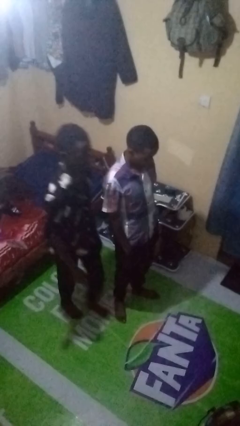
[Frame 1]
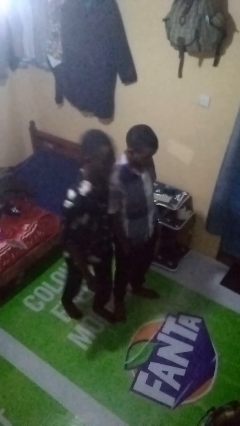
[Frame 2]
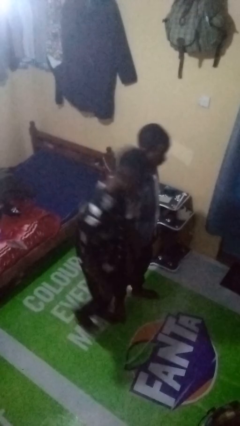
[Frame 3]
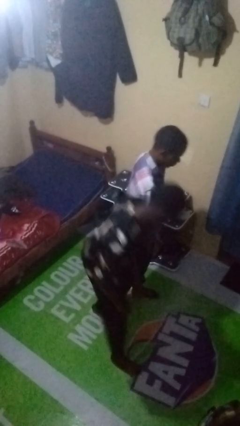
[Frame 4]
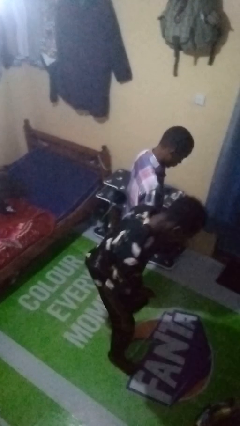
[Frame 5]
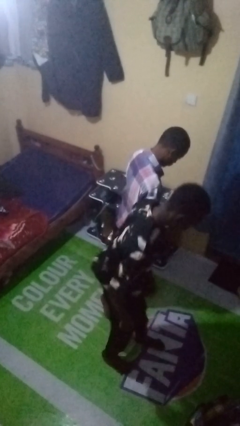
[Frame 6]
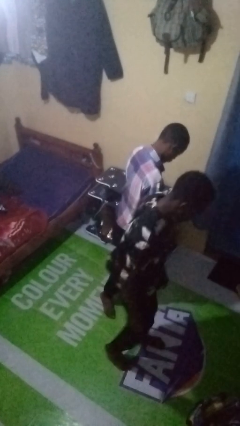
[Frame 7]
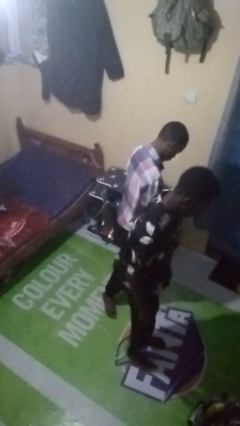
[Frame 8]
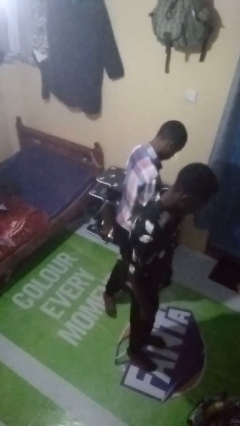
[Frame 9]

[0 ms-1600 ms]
person bumps into person

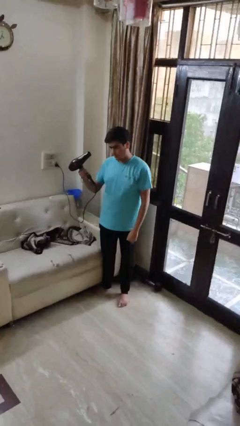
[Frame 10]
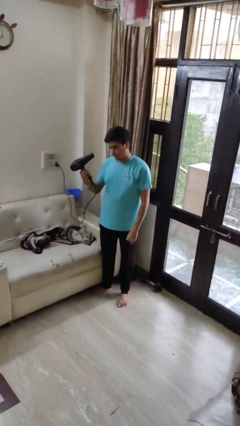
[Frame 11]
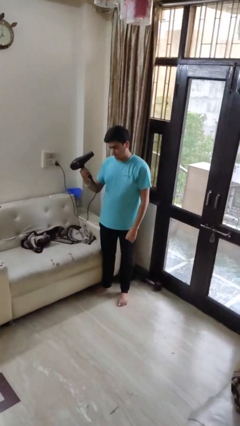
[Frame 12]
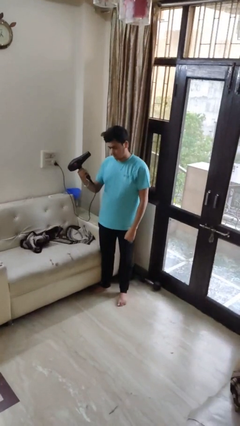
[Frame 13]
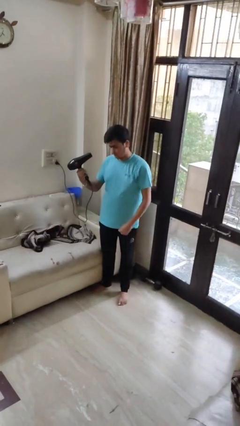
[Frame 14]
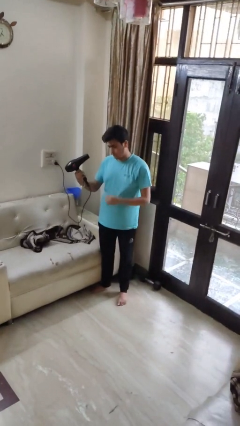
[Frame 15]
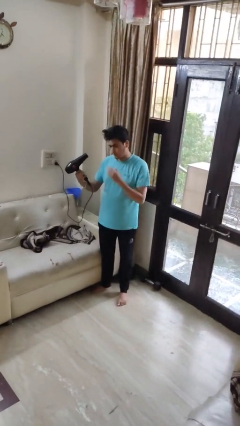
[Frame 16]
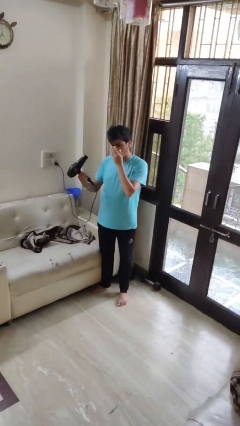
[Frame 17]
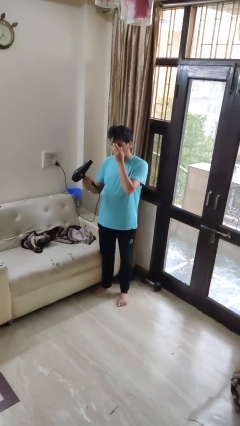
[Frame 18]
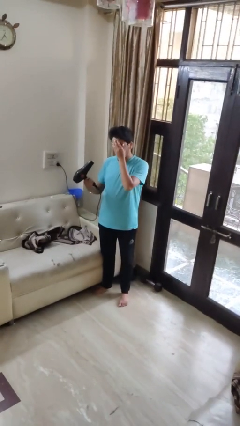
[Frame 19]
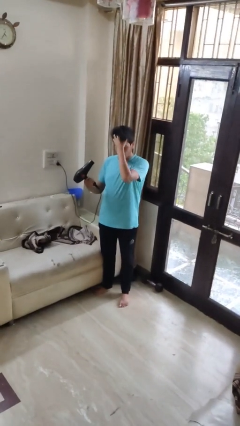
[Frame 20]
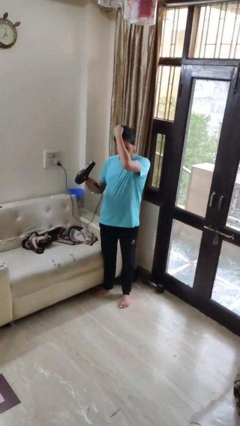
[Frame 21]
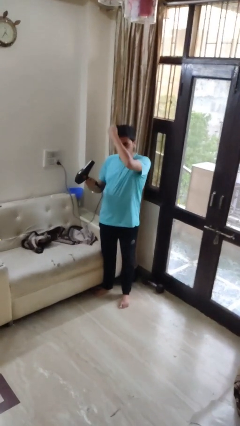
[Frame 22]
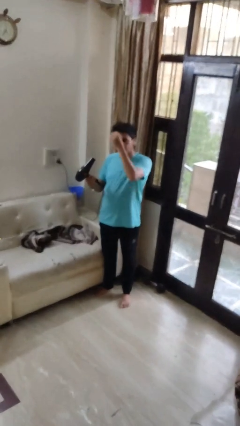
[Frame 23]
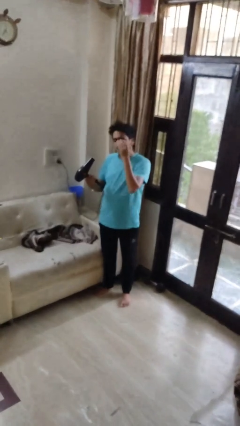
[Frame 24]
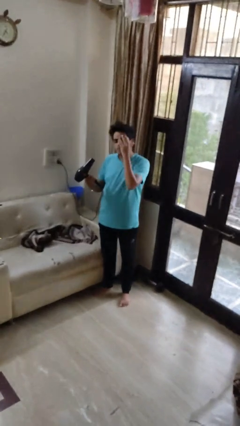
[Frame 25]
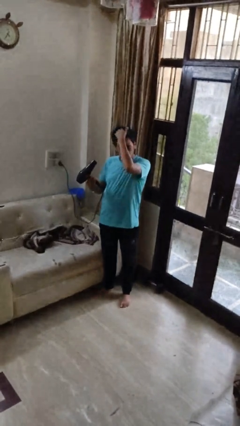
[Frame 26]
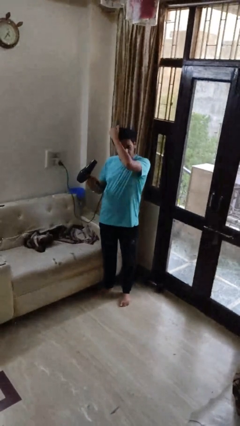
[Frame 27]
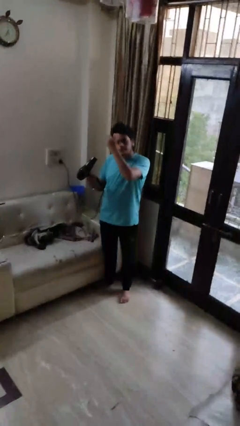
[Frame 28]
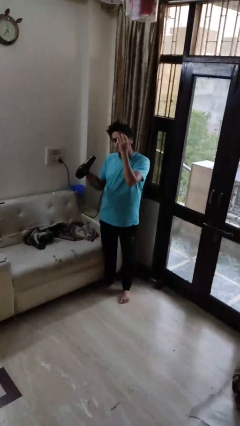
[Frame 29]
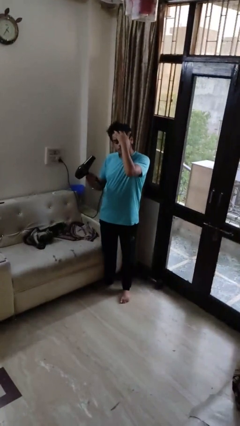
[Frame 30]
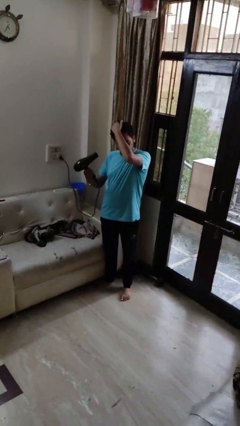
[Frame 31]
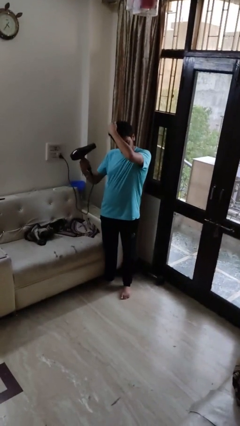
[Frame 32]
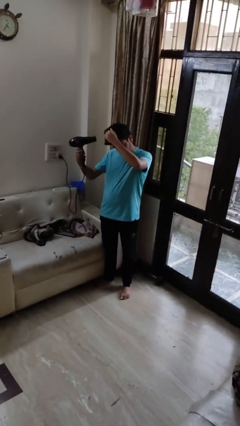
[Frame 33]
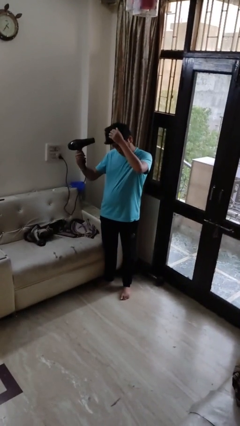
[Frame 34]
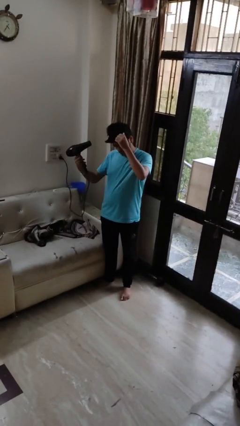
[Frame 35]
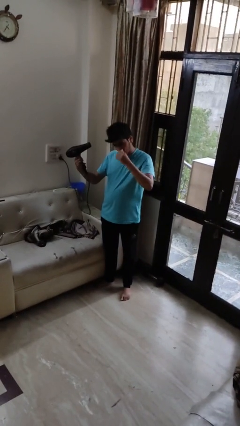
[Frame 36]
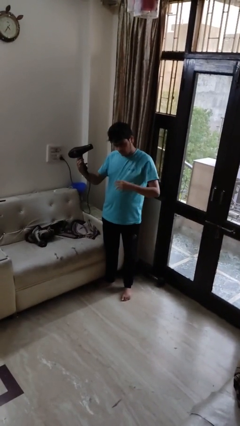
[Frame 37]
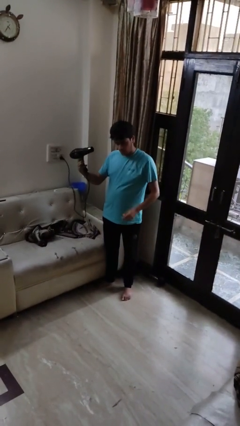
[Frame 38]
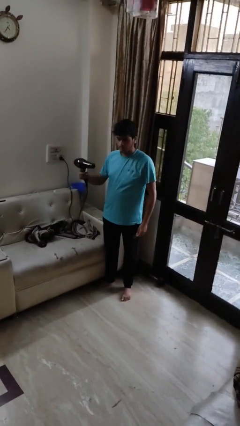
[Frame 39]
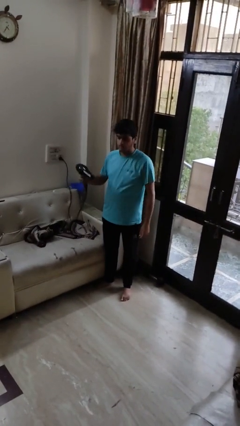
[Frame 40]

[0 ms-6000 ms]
person dries hair with hairdryer

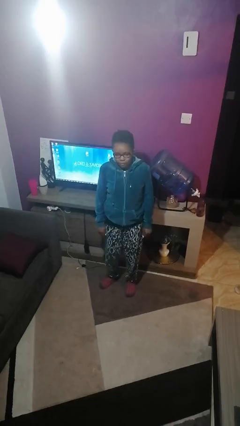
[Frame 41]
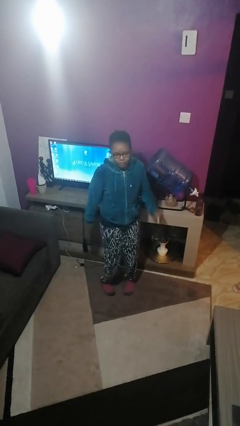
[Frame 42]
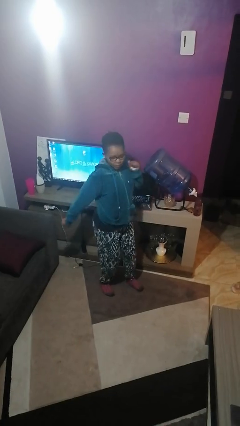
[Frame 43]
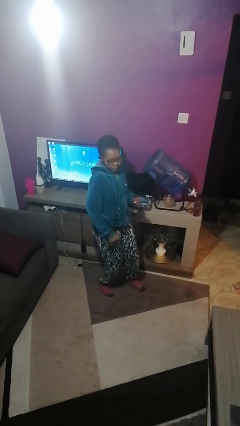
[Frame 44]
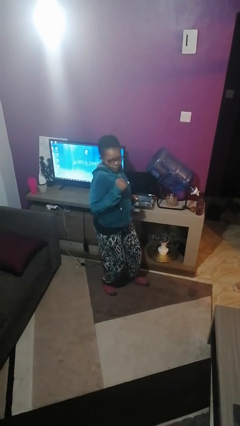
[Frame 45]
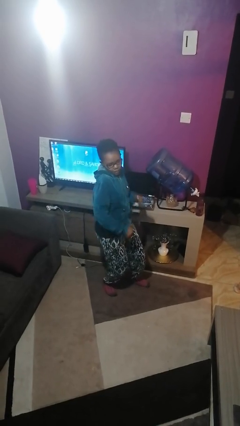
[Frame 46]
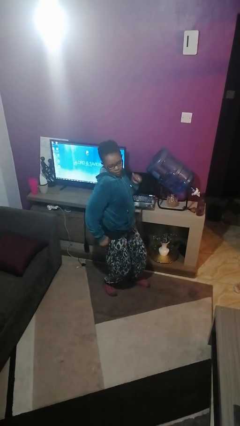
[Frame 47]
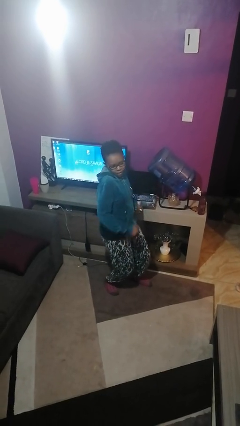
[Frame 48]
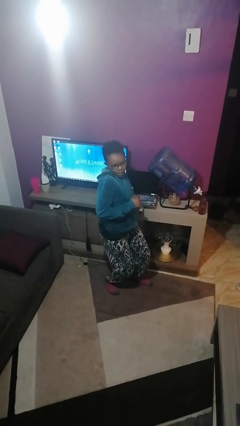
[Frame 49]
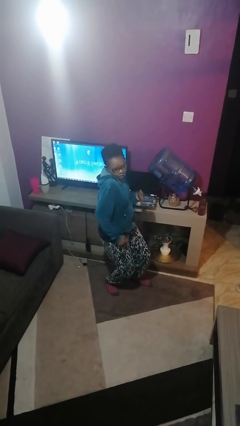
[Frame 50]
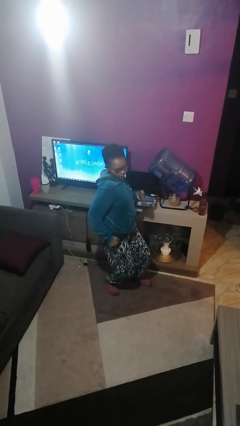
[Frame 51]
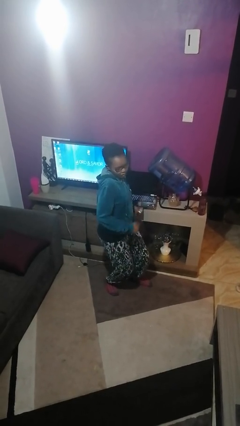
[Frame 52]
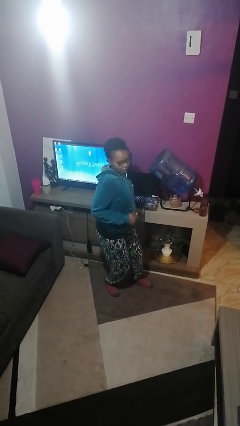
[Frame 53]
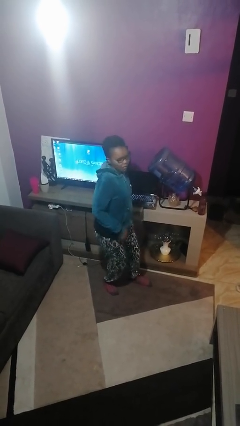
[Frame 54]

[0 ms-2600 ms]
person dances in place

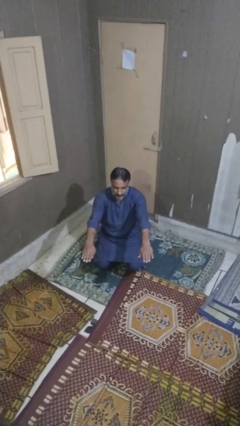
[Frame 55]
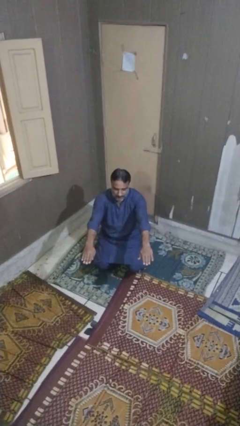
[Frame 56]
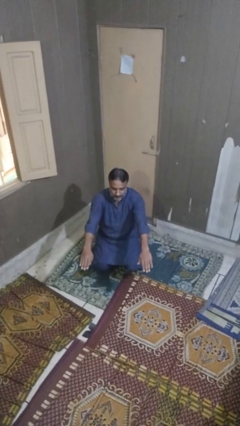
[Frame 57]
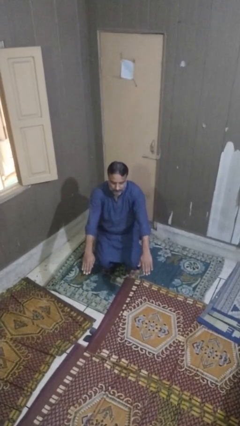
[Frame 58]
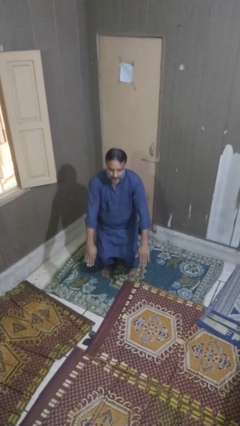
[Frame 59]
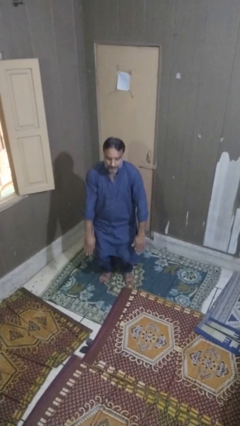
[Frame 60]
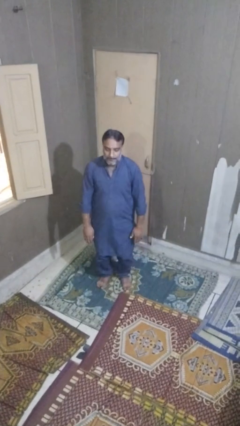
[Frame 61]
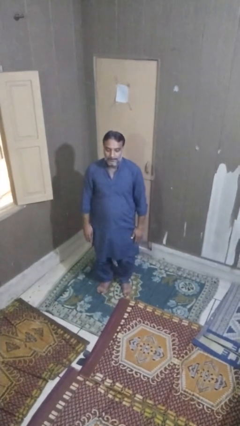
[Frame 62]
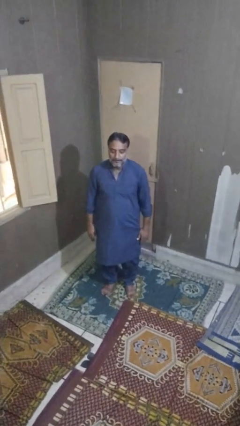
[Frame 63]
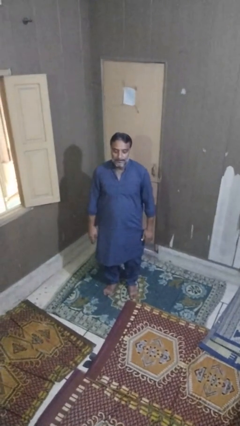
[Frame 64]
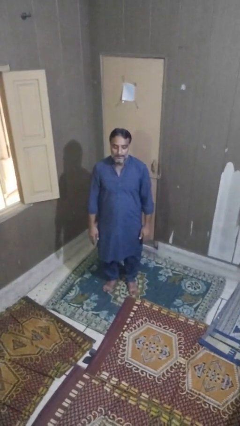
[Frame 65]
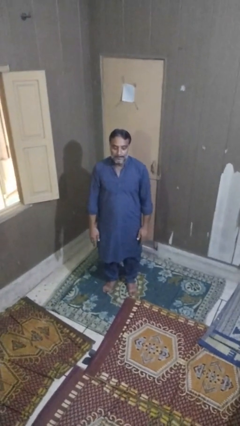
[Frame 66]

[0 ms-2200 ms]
person stands up

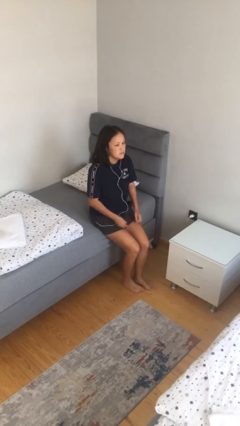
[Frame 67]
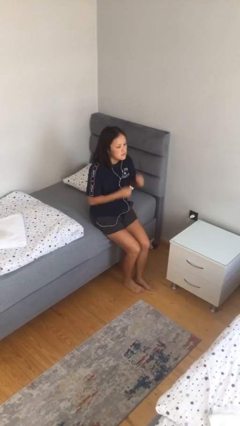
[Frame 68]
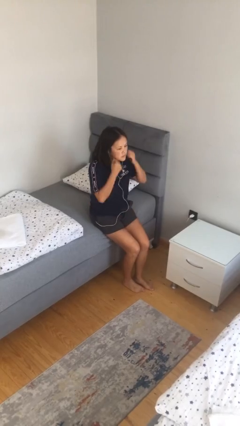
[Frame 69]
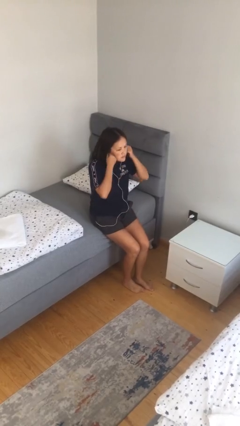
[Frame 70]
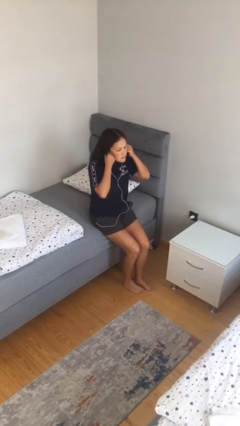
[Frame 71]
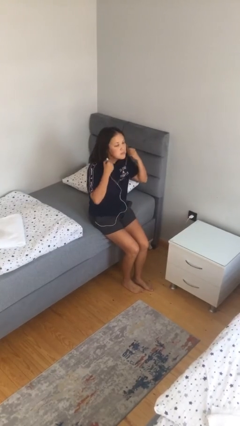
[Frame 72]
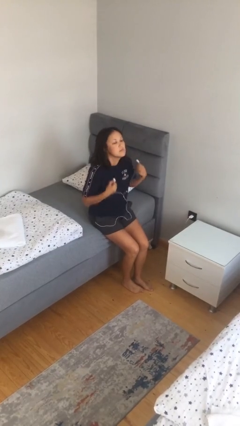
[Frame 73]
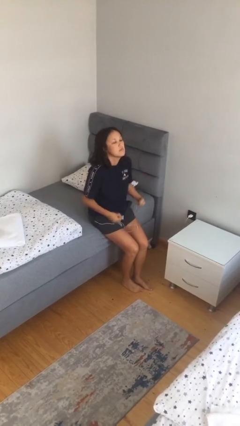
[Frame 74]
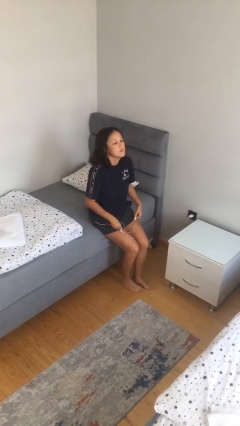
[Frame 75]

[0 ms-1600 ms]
person takes off headphones

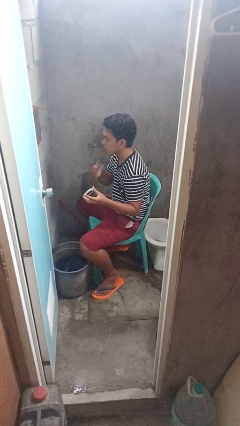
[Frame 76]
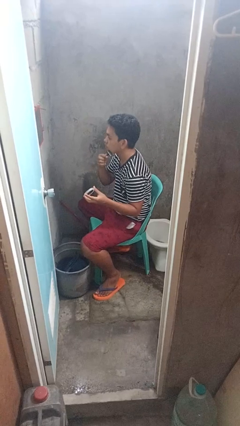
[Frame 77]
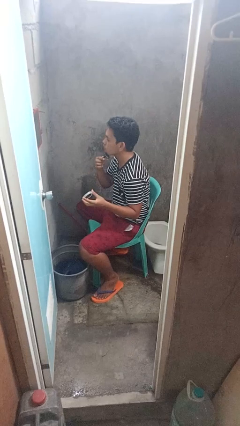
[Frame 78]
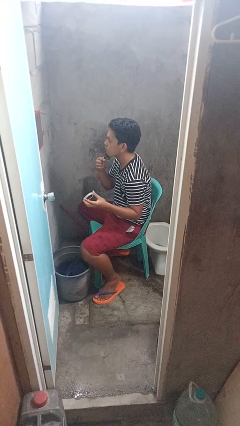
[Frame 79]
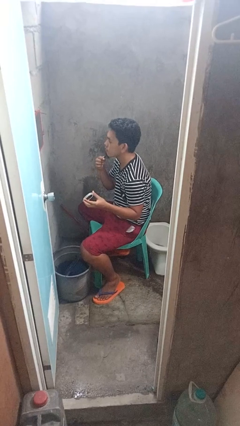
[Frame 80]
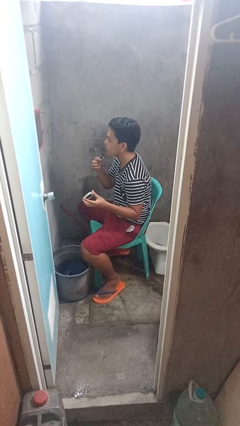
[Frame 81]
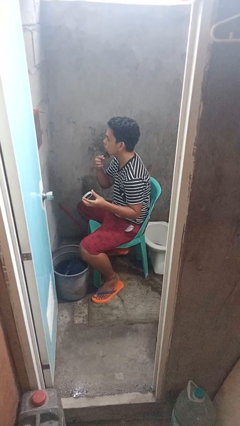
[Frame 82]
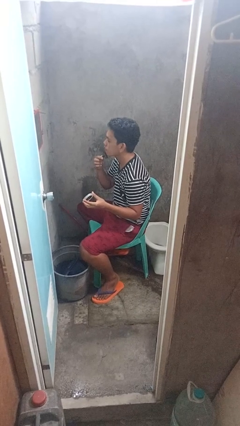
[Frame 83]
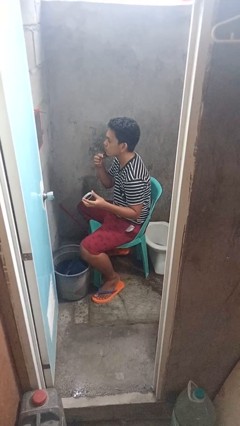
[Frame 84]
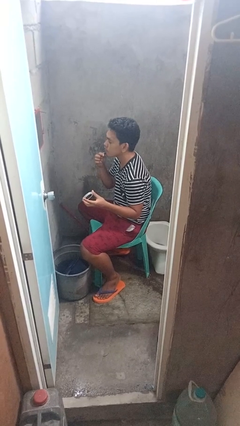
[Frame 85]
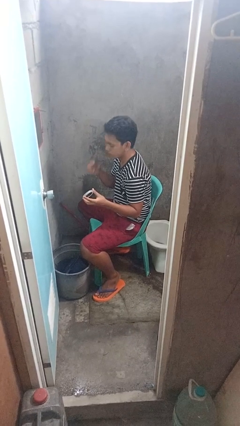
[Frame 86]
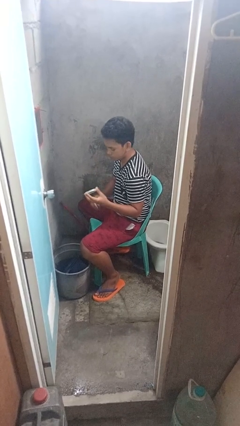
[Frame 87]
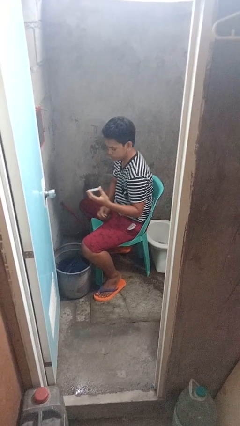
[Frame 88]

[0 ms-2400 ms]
person shaves face

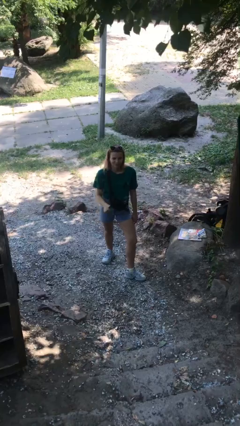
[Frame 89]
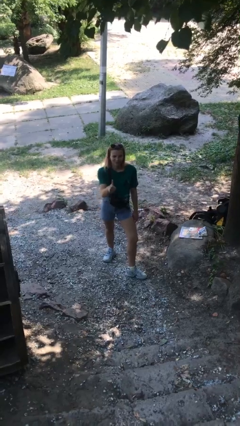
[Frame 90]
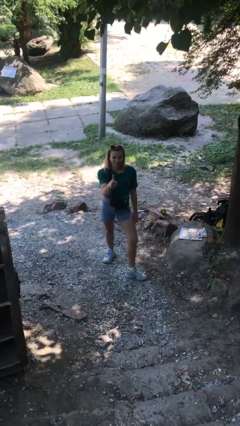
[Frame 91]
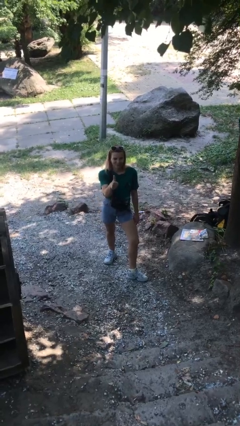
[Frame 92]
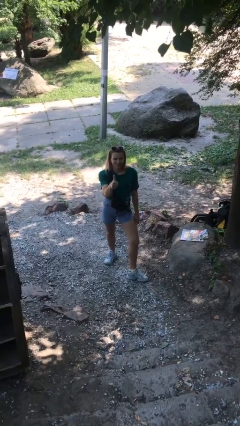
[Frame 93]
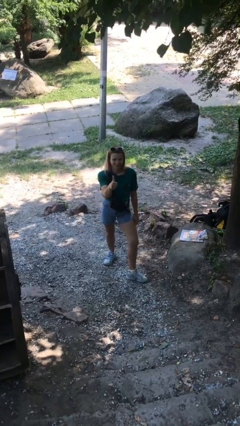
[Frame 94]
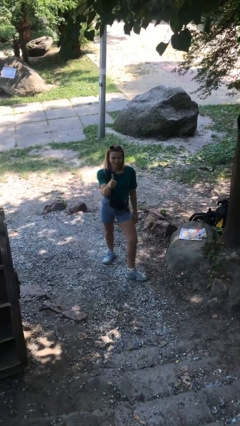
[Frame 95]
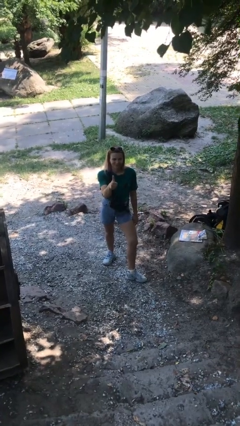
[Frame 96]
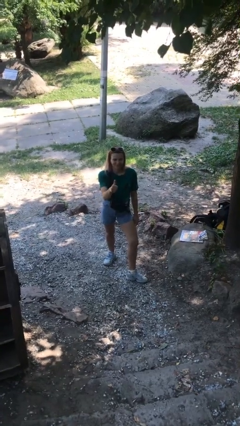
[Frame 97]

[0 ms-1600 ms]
person gestures thumbs up
